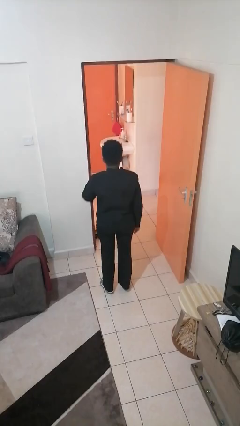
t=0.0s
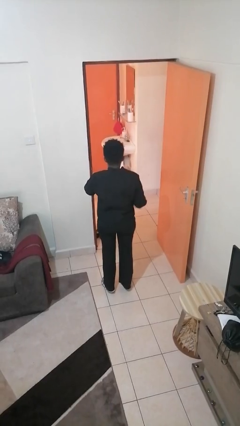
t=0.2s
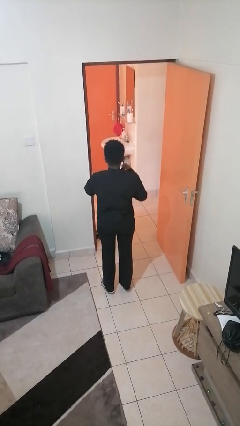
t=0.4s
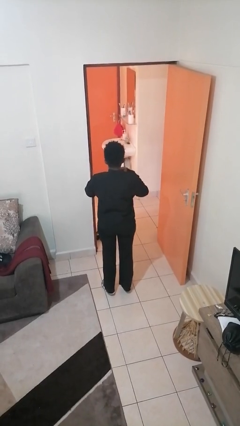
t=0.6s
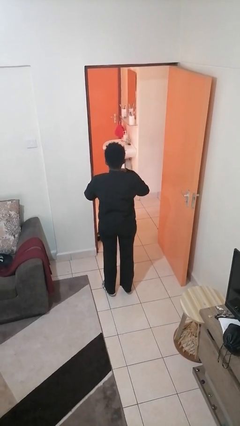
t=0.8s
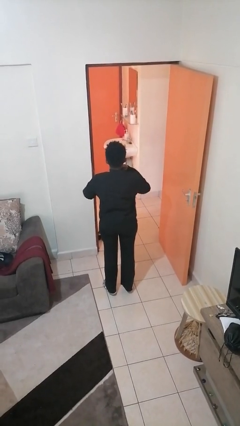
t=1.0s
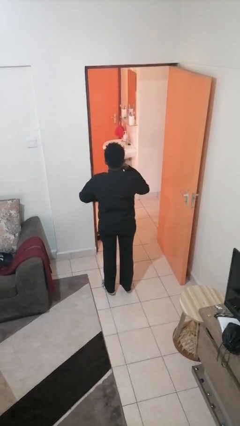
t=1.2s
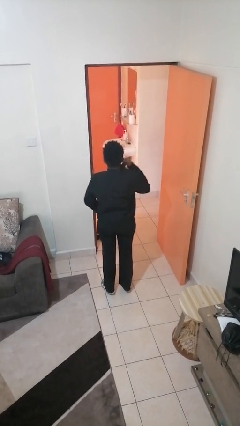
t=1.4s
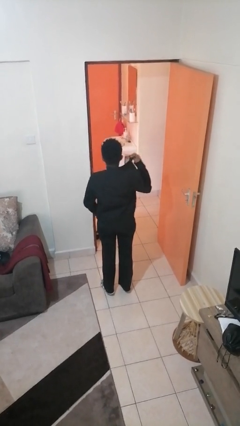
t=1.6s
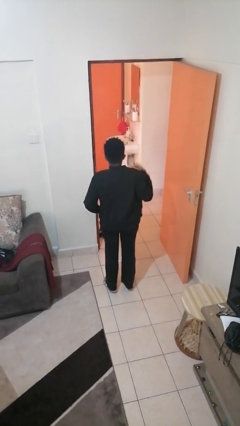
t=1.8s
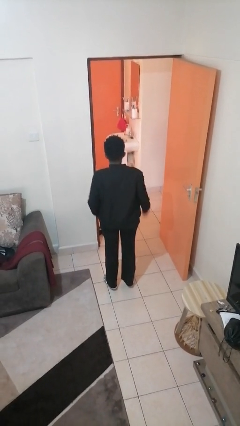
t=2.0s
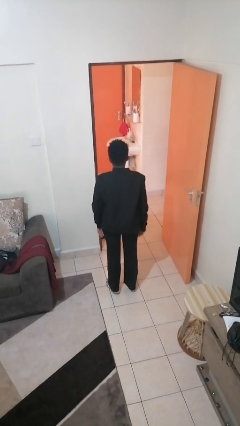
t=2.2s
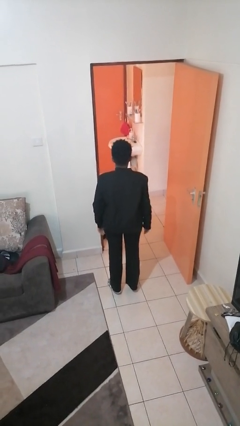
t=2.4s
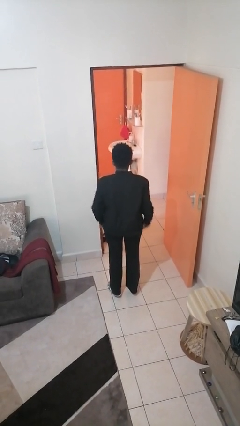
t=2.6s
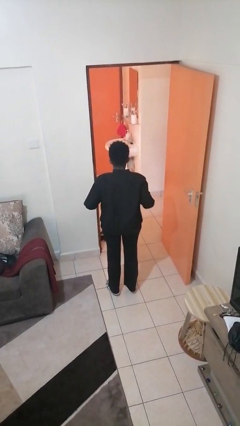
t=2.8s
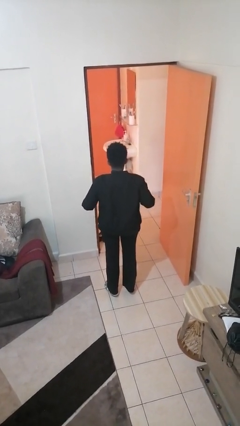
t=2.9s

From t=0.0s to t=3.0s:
person unzips jacket

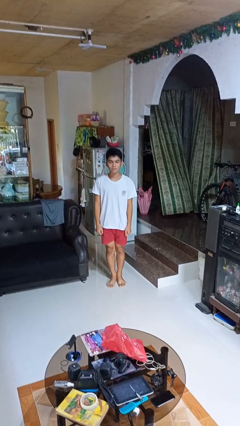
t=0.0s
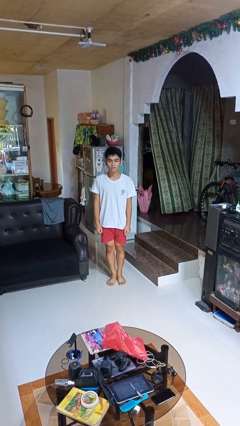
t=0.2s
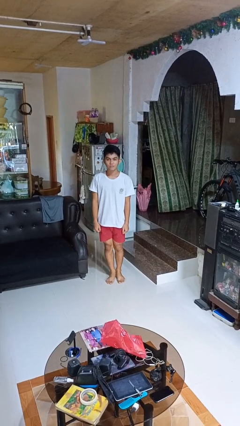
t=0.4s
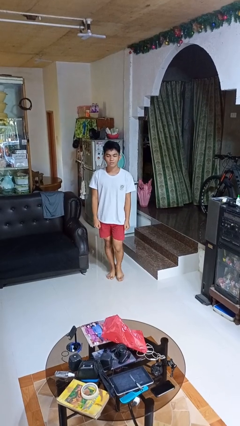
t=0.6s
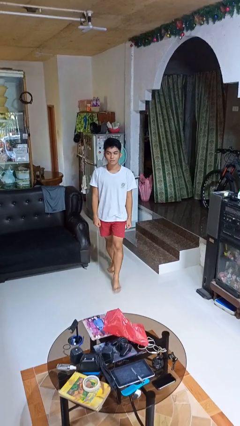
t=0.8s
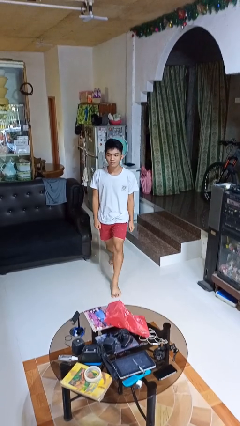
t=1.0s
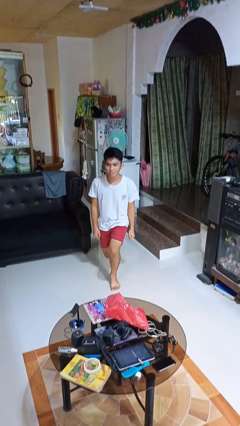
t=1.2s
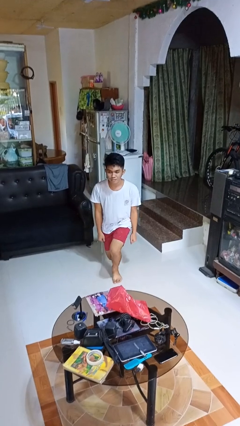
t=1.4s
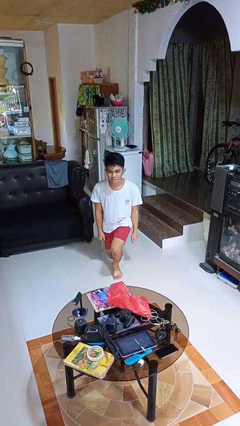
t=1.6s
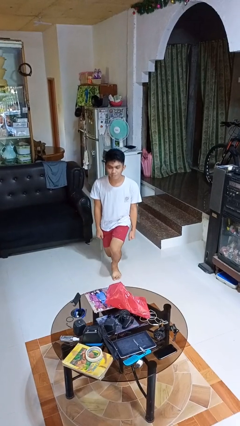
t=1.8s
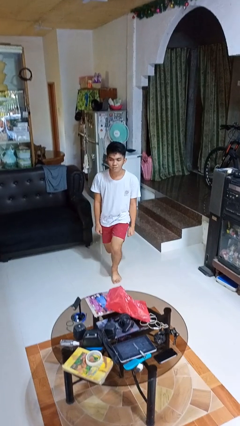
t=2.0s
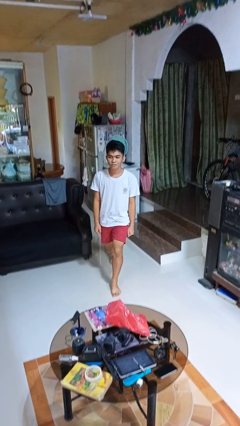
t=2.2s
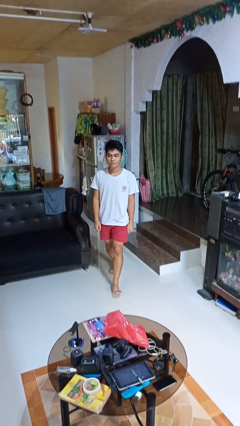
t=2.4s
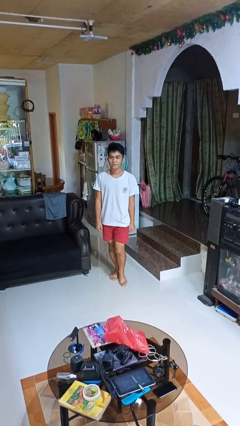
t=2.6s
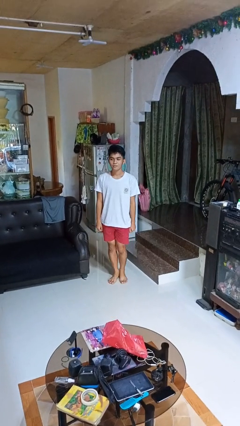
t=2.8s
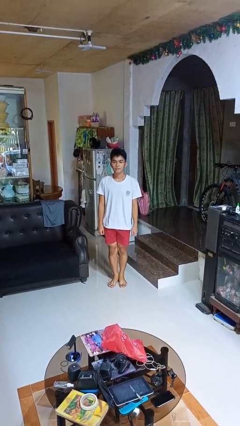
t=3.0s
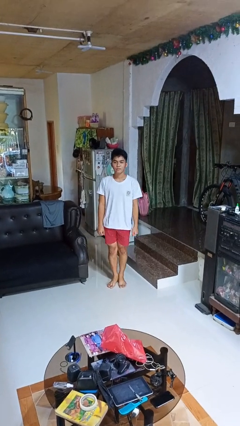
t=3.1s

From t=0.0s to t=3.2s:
person exercises with lunges

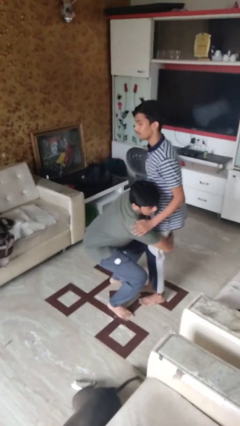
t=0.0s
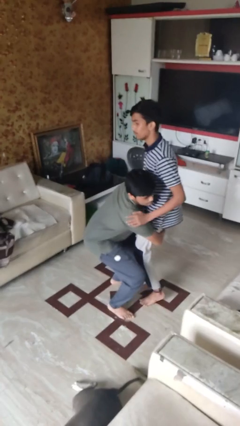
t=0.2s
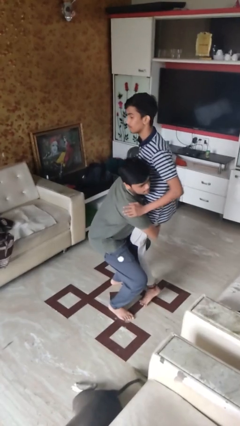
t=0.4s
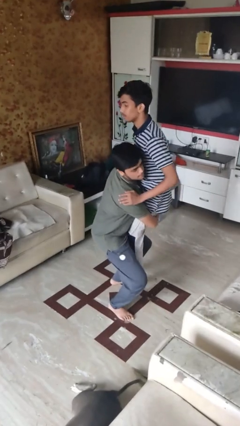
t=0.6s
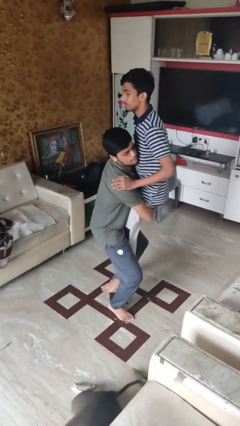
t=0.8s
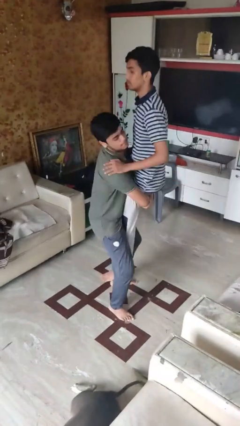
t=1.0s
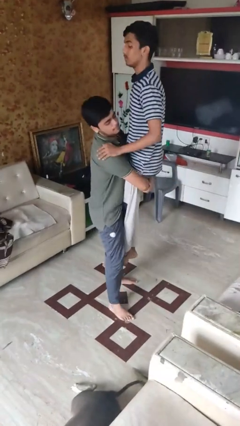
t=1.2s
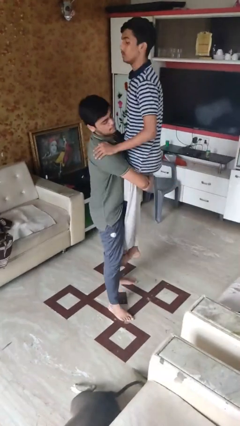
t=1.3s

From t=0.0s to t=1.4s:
person picks up person

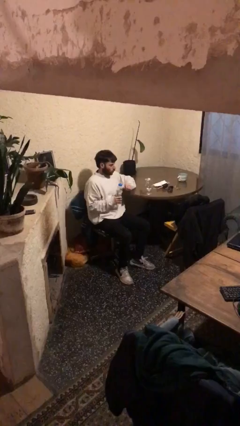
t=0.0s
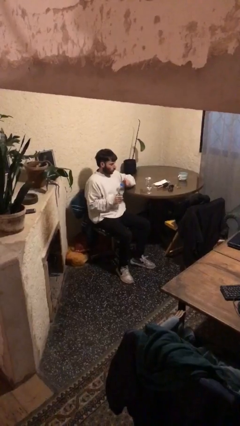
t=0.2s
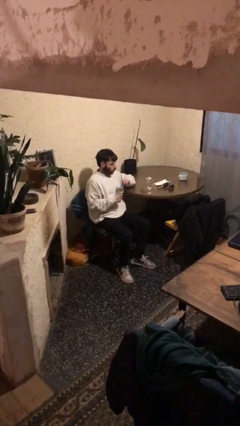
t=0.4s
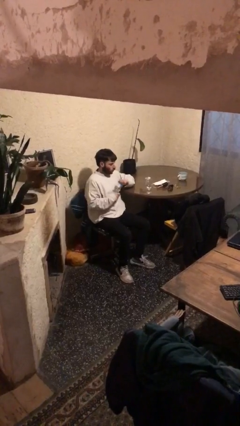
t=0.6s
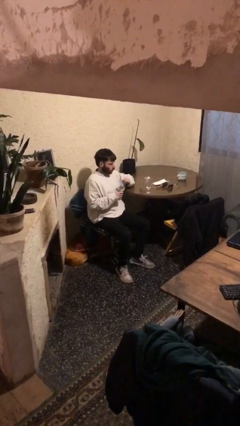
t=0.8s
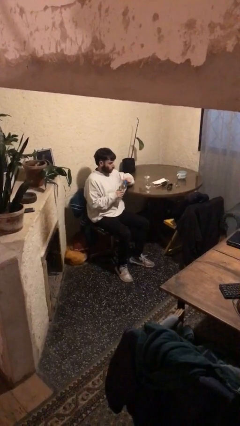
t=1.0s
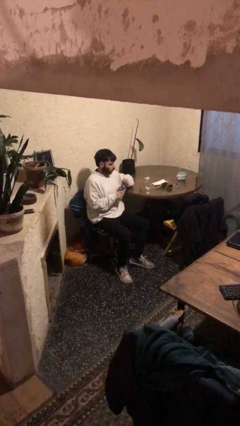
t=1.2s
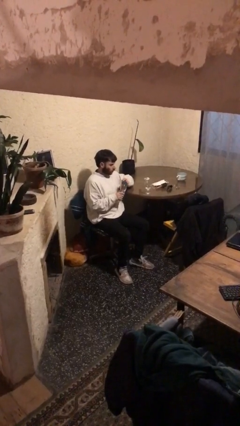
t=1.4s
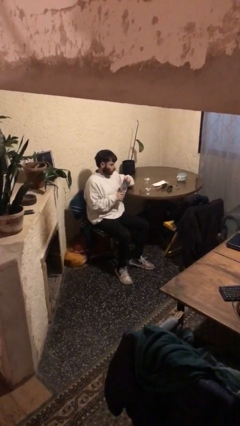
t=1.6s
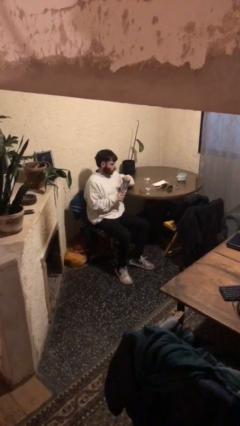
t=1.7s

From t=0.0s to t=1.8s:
person unscrews lid from bottle

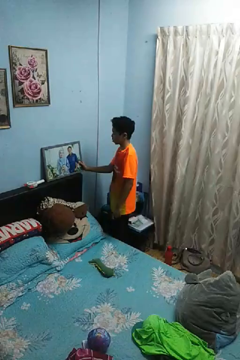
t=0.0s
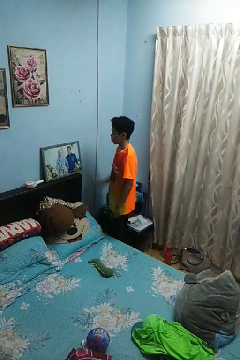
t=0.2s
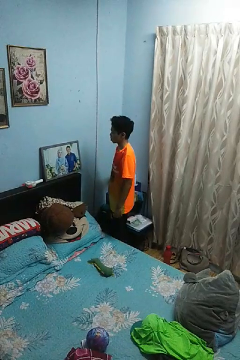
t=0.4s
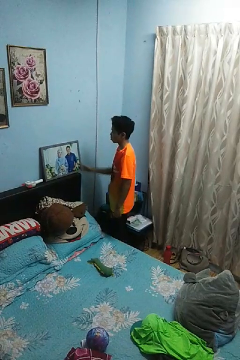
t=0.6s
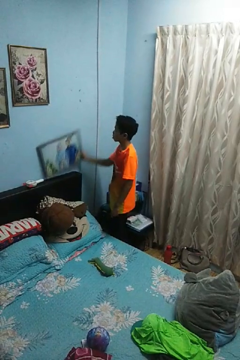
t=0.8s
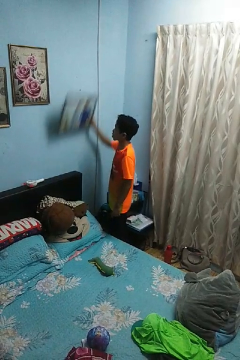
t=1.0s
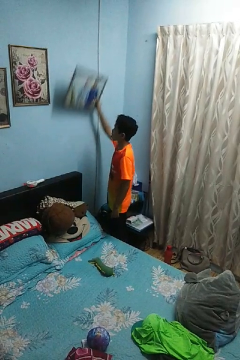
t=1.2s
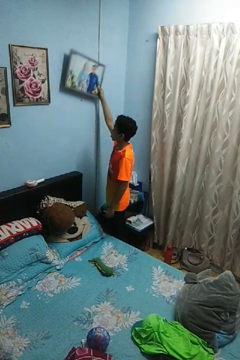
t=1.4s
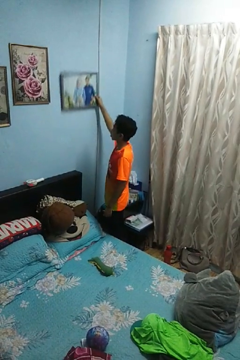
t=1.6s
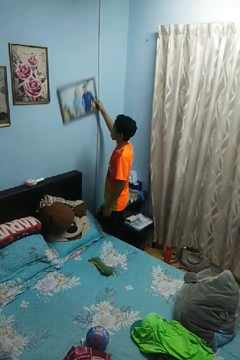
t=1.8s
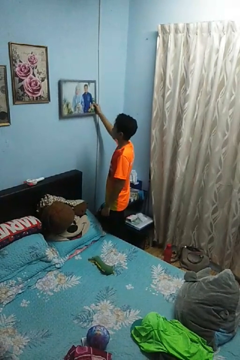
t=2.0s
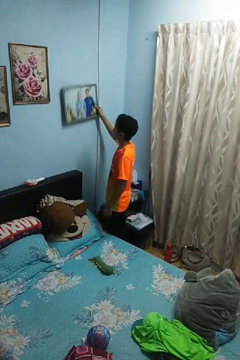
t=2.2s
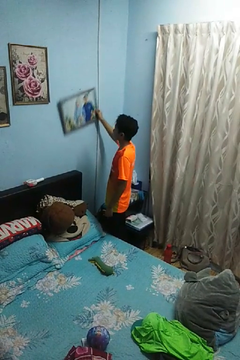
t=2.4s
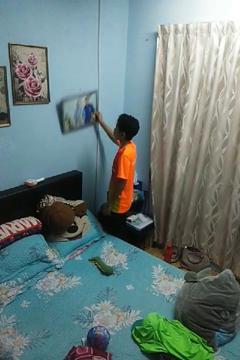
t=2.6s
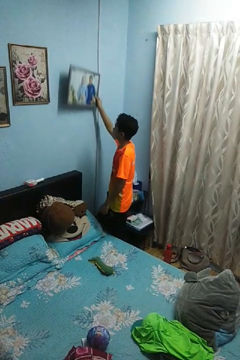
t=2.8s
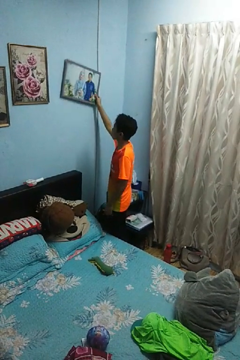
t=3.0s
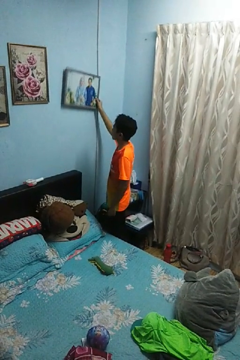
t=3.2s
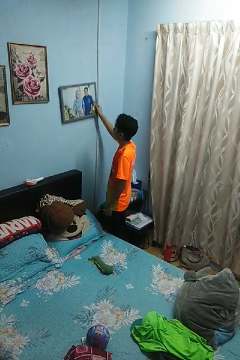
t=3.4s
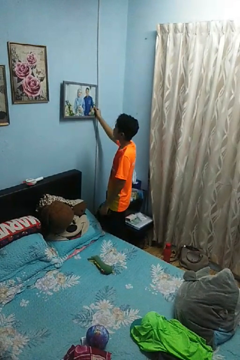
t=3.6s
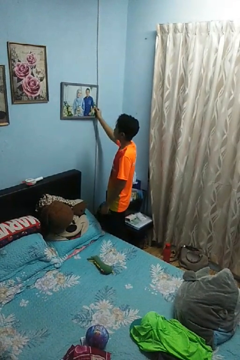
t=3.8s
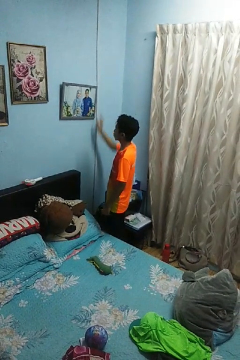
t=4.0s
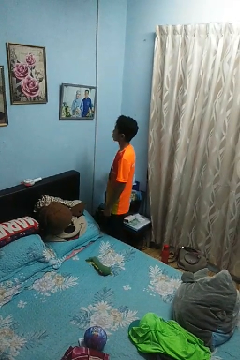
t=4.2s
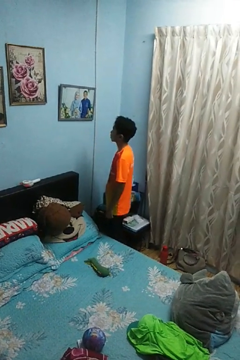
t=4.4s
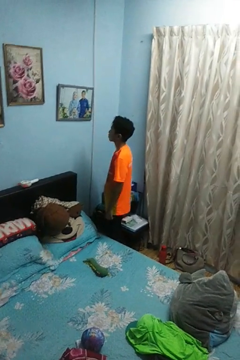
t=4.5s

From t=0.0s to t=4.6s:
person puts up picture frame

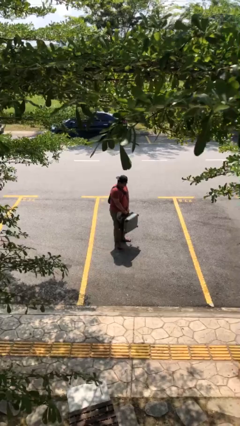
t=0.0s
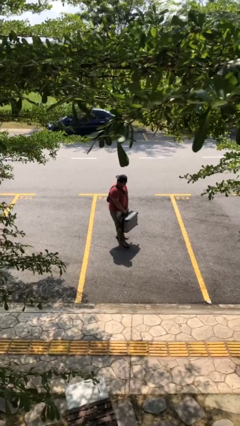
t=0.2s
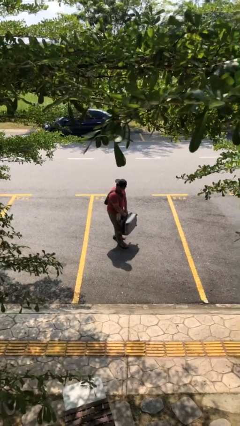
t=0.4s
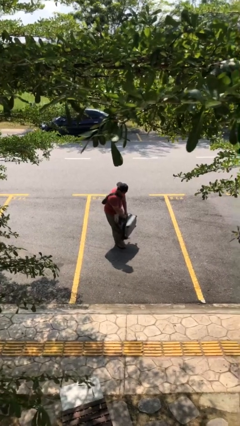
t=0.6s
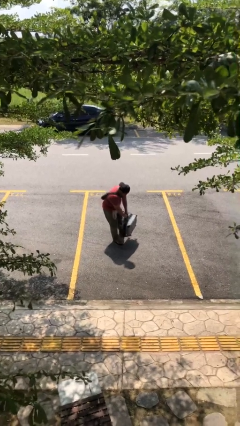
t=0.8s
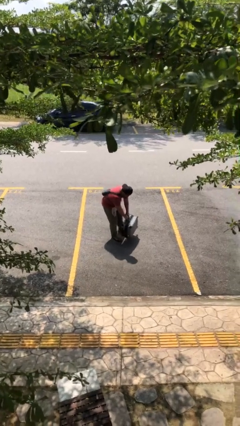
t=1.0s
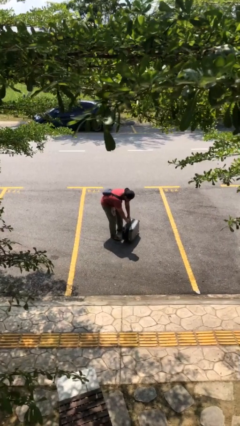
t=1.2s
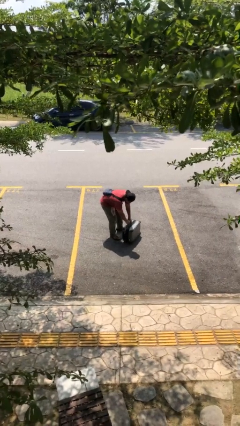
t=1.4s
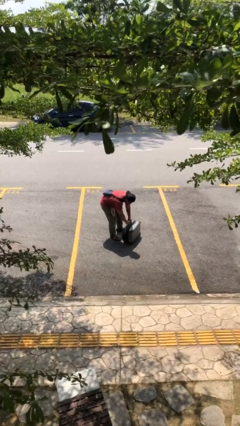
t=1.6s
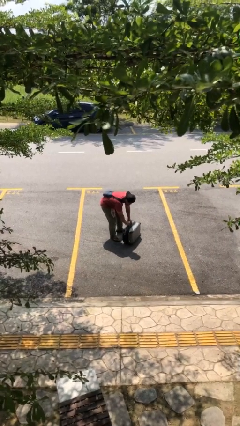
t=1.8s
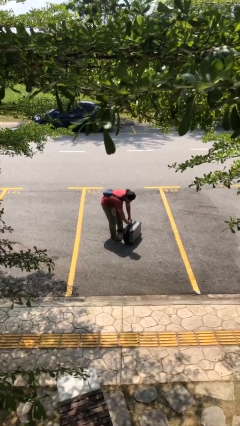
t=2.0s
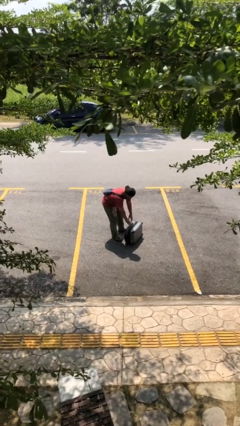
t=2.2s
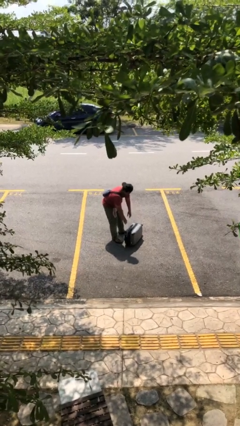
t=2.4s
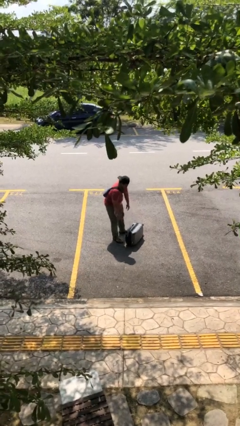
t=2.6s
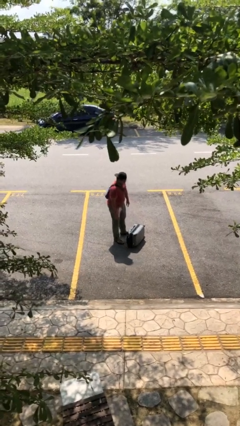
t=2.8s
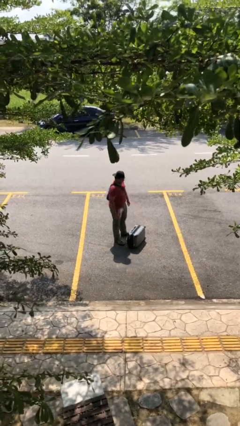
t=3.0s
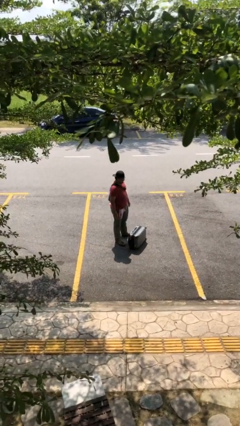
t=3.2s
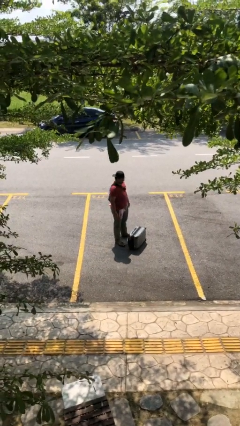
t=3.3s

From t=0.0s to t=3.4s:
person puts down object on floor

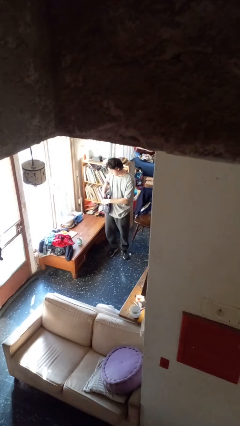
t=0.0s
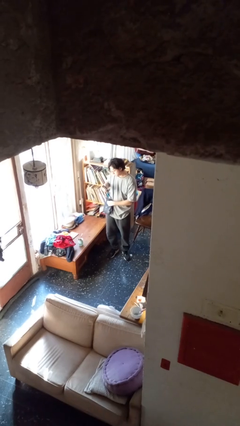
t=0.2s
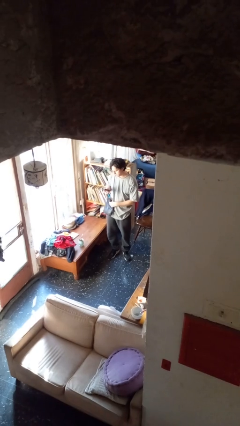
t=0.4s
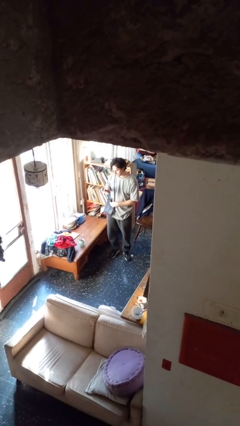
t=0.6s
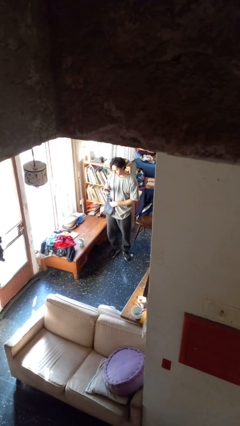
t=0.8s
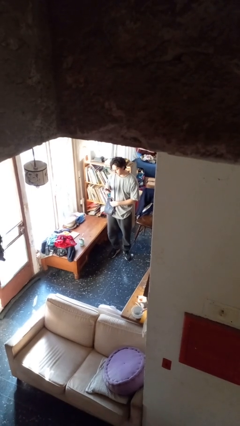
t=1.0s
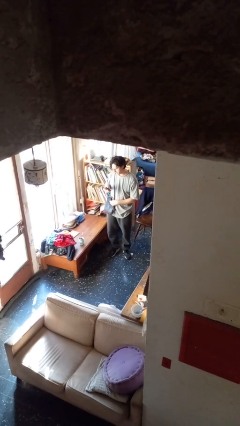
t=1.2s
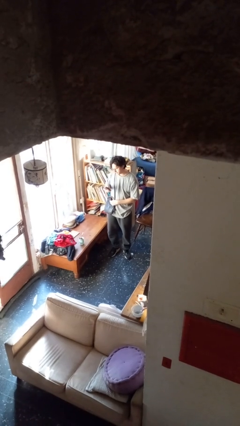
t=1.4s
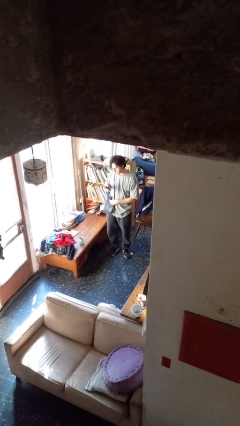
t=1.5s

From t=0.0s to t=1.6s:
person takes object from purse
